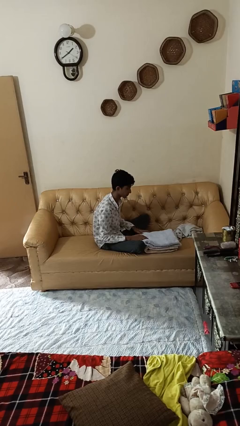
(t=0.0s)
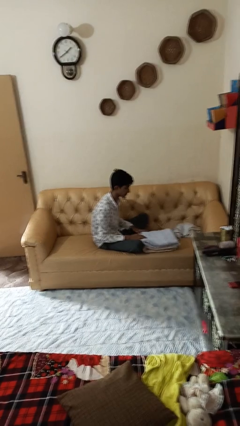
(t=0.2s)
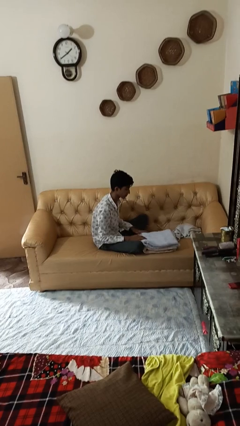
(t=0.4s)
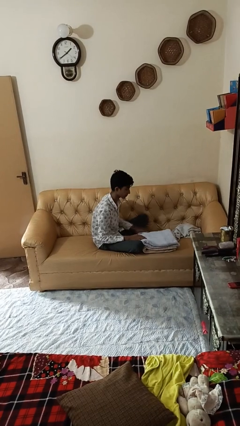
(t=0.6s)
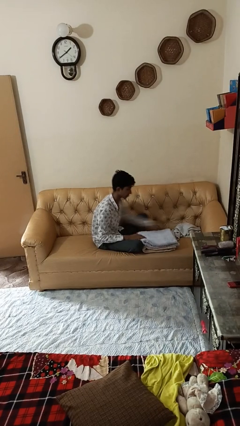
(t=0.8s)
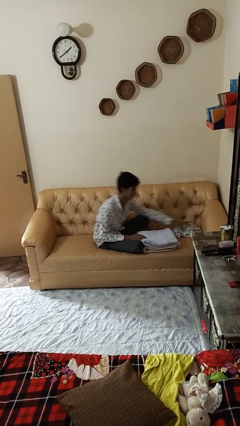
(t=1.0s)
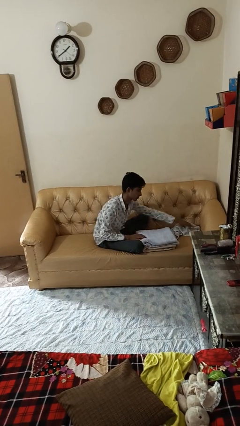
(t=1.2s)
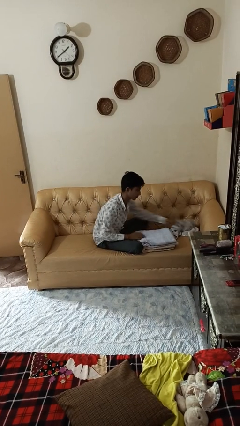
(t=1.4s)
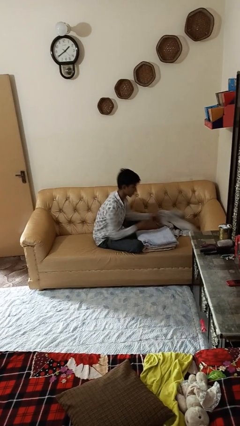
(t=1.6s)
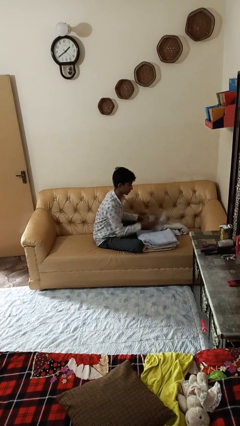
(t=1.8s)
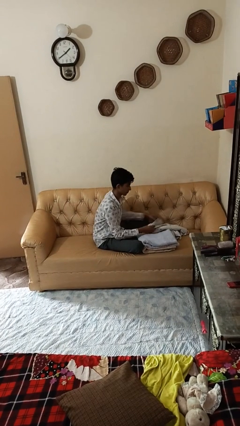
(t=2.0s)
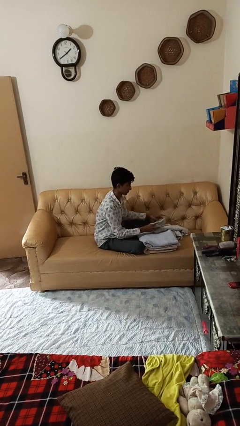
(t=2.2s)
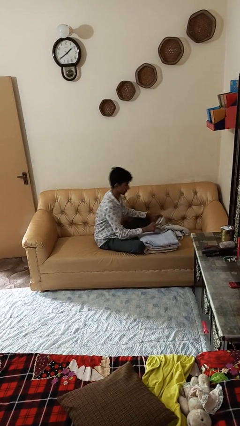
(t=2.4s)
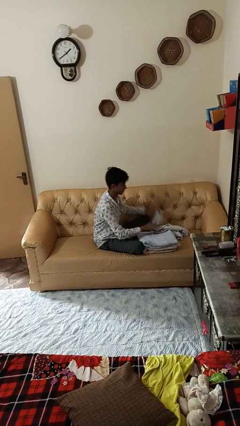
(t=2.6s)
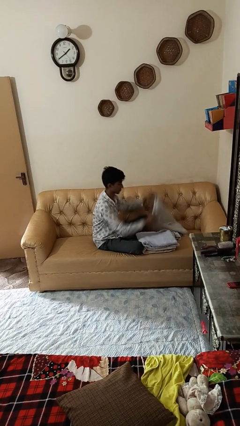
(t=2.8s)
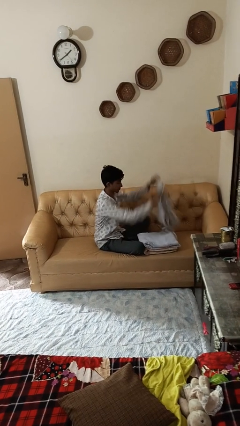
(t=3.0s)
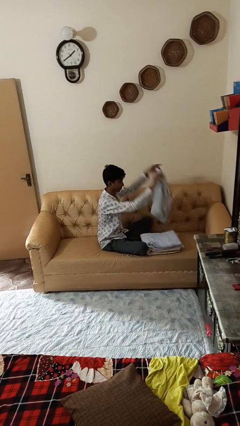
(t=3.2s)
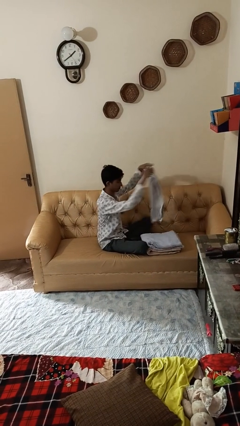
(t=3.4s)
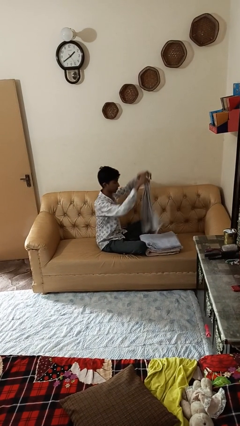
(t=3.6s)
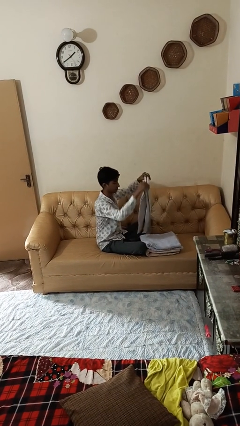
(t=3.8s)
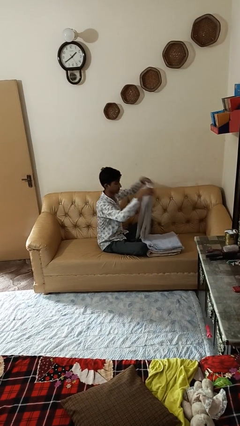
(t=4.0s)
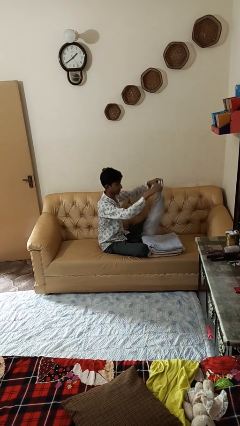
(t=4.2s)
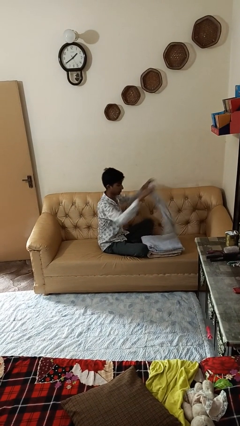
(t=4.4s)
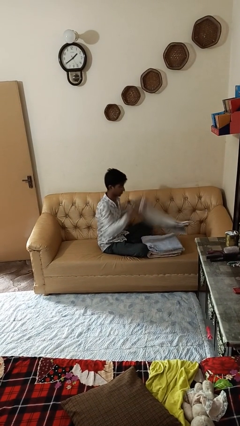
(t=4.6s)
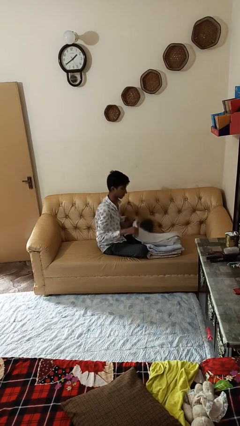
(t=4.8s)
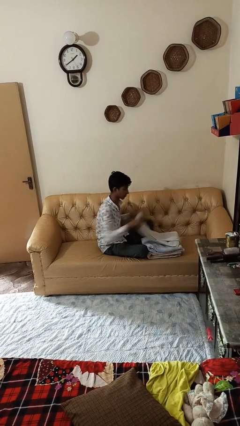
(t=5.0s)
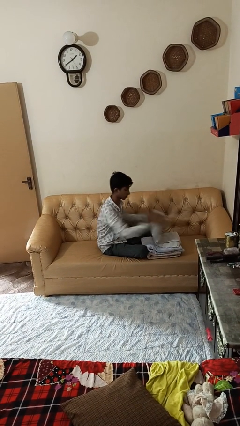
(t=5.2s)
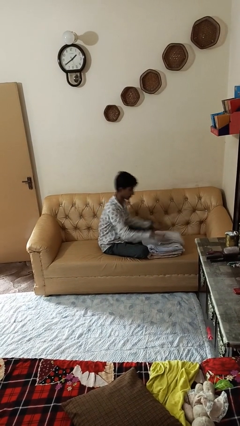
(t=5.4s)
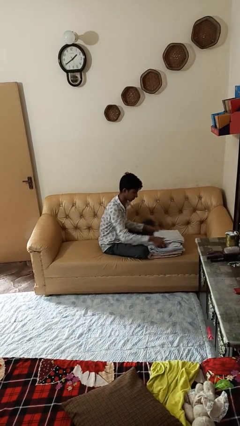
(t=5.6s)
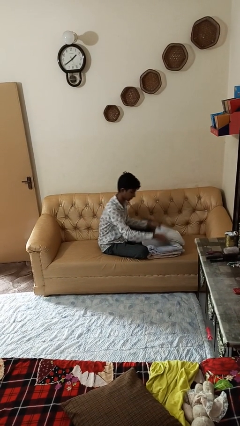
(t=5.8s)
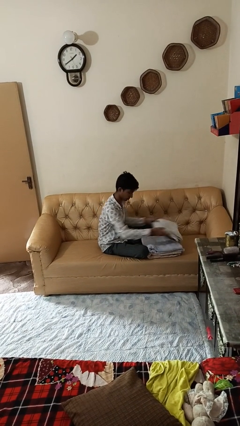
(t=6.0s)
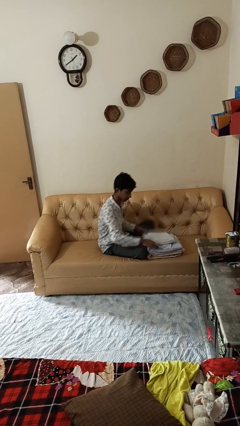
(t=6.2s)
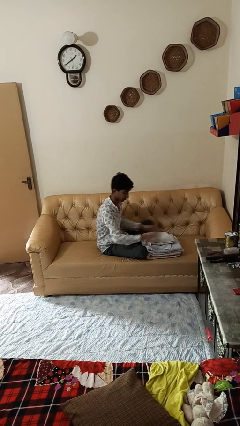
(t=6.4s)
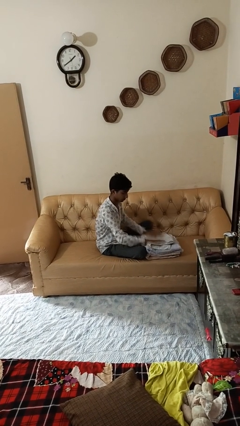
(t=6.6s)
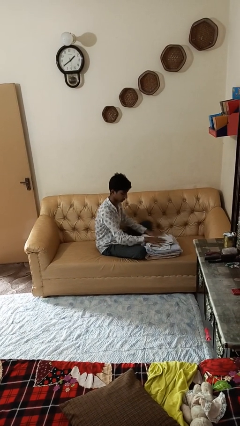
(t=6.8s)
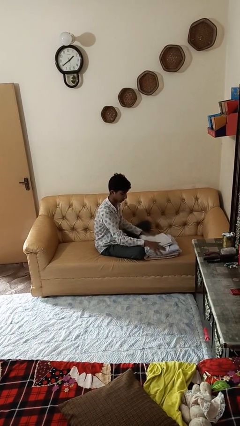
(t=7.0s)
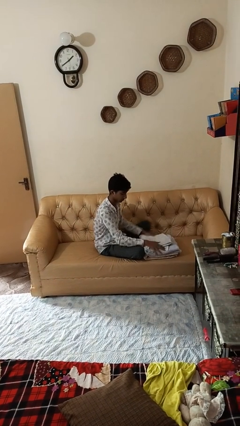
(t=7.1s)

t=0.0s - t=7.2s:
person folds towel

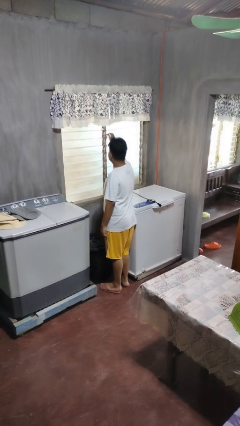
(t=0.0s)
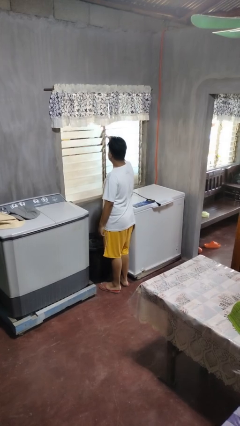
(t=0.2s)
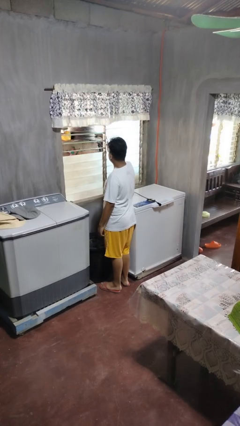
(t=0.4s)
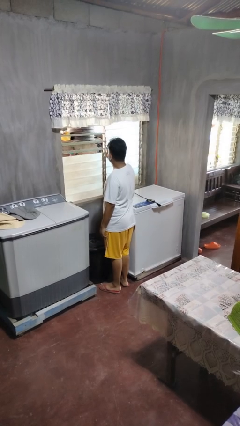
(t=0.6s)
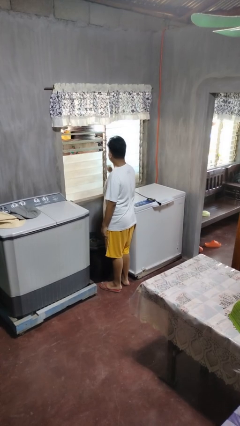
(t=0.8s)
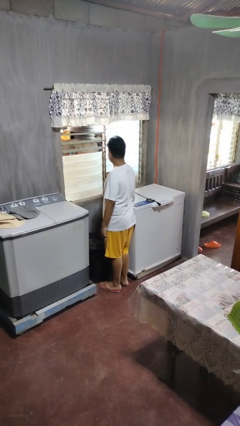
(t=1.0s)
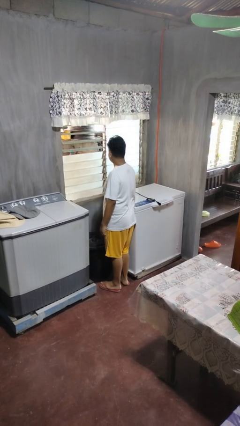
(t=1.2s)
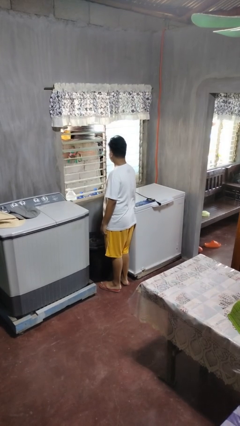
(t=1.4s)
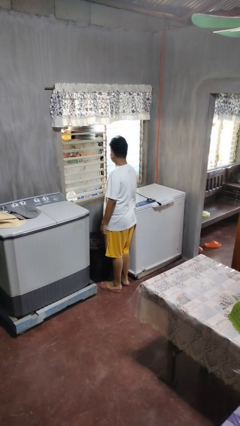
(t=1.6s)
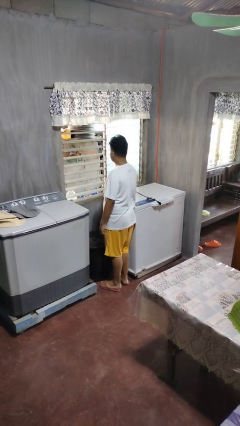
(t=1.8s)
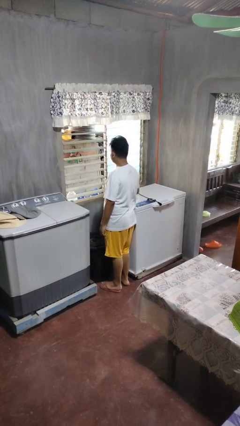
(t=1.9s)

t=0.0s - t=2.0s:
person opens home window

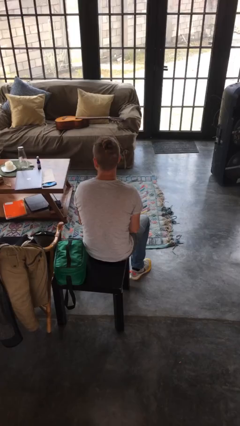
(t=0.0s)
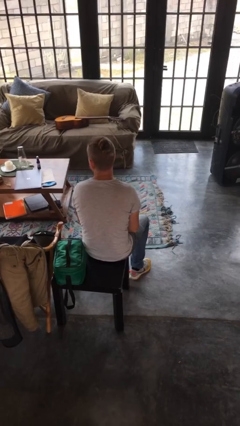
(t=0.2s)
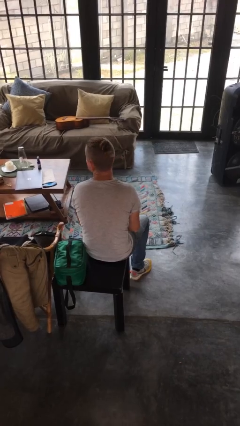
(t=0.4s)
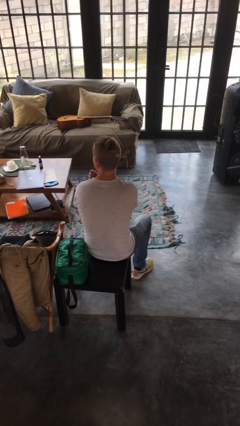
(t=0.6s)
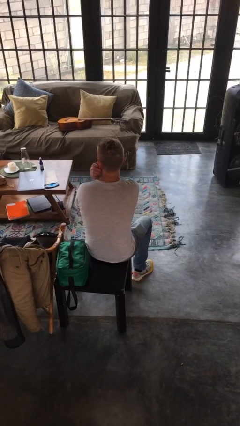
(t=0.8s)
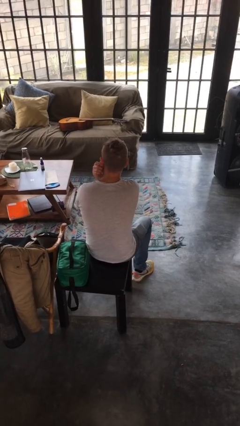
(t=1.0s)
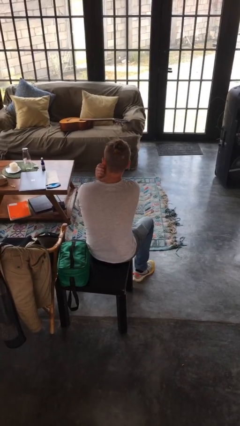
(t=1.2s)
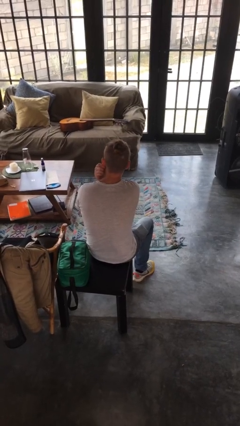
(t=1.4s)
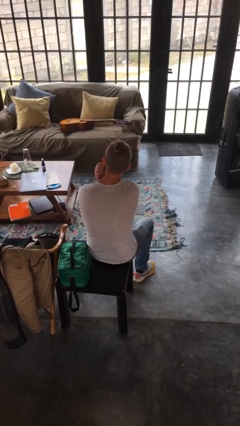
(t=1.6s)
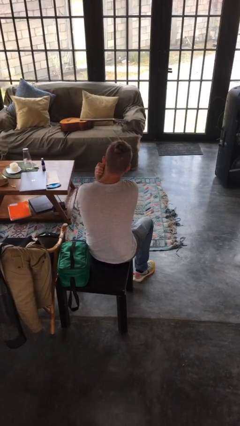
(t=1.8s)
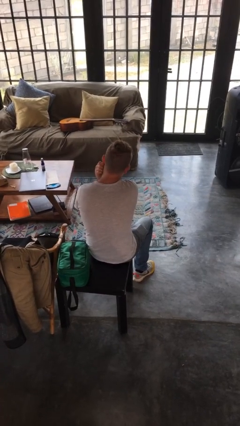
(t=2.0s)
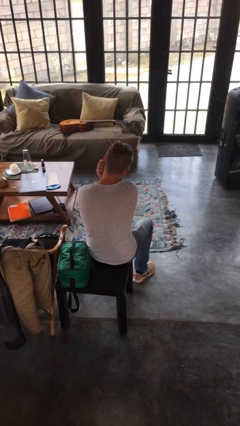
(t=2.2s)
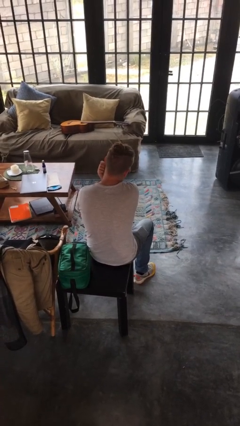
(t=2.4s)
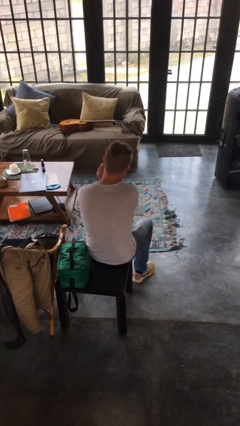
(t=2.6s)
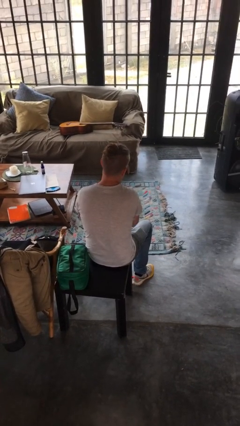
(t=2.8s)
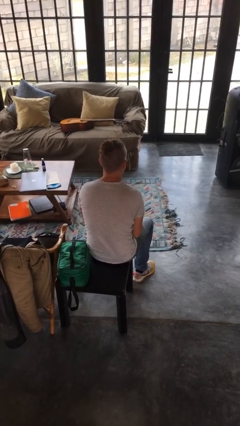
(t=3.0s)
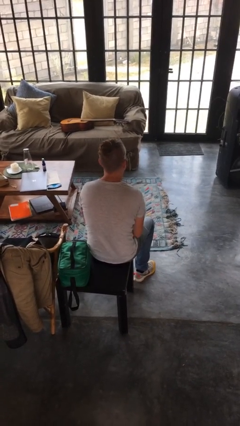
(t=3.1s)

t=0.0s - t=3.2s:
person touches earlobe

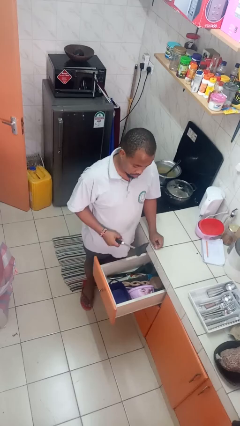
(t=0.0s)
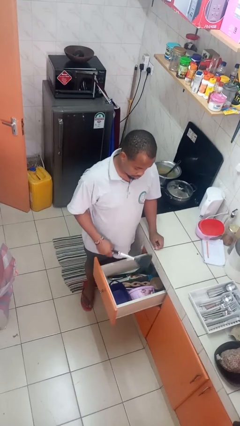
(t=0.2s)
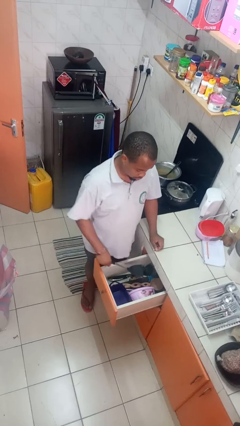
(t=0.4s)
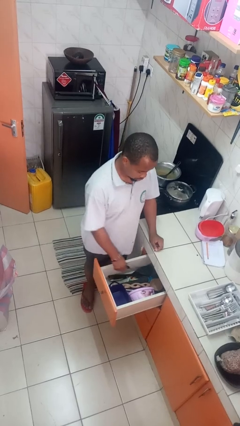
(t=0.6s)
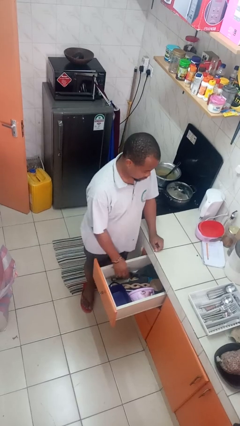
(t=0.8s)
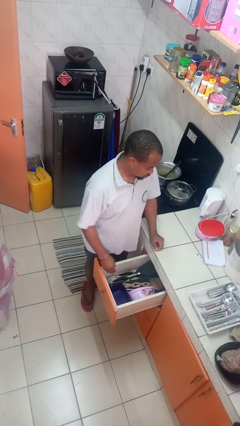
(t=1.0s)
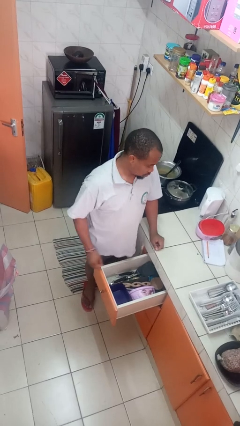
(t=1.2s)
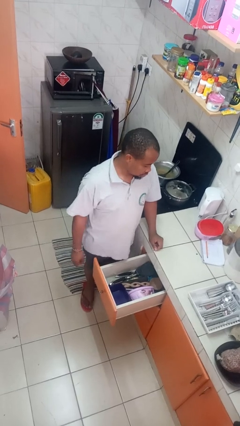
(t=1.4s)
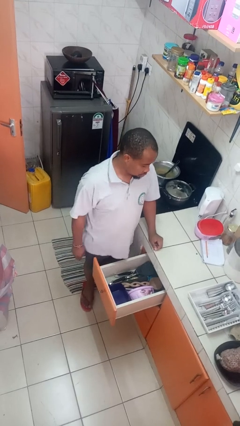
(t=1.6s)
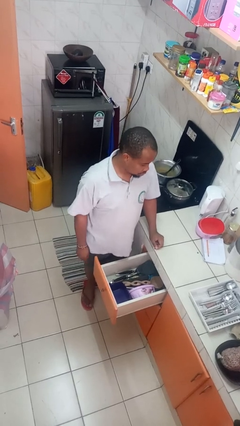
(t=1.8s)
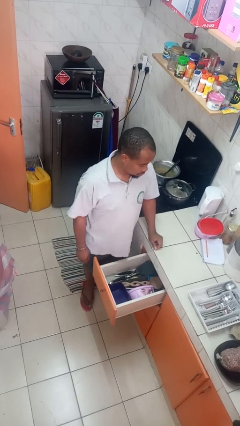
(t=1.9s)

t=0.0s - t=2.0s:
person puts object into kitchen drawer

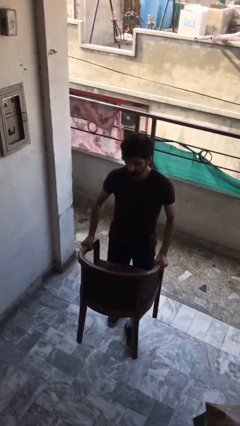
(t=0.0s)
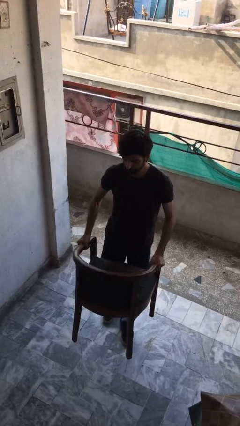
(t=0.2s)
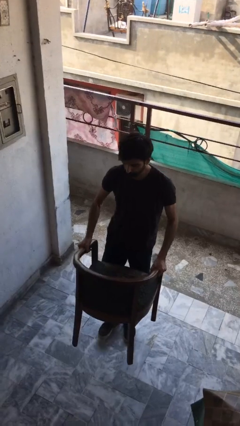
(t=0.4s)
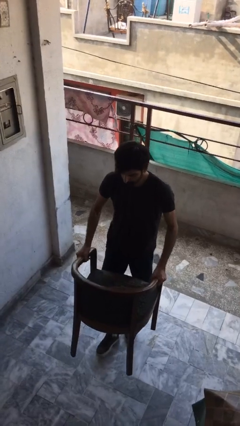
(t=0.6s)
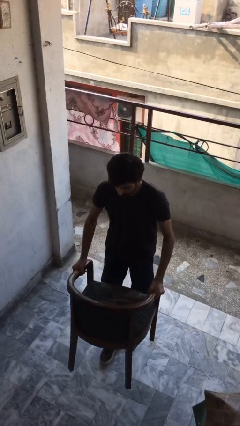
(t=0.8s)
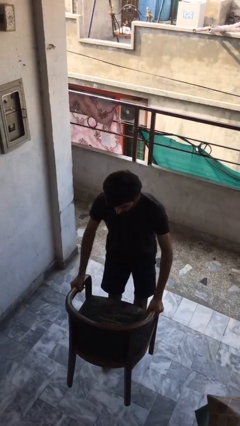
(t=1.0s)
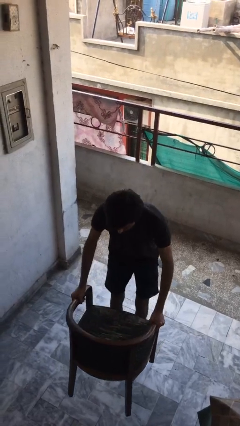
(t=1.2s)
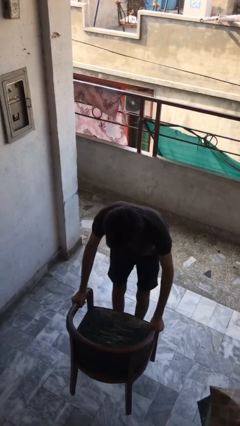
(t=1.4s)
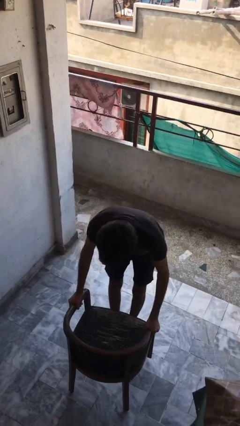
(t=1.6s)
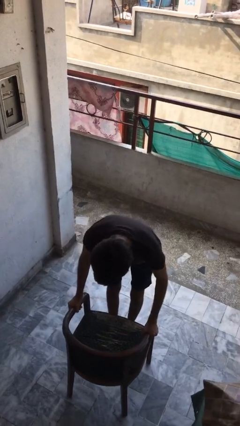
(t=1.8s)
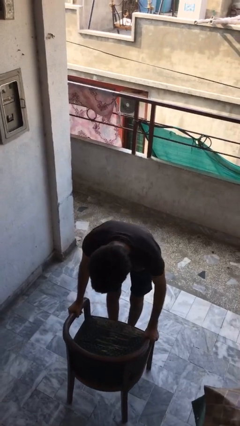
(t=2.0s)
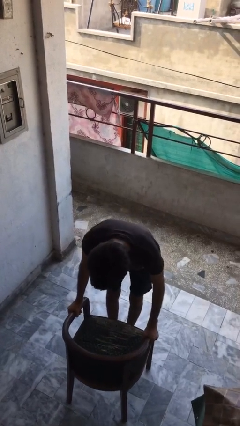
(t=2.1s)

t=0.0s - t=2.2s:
person puts down object on floor

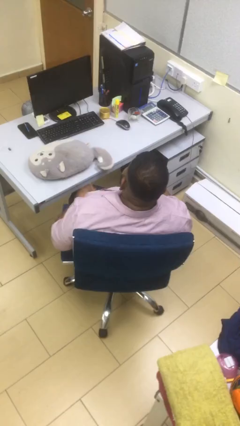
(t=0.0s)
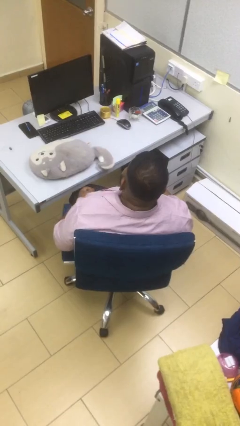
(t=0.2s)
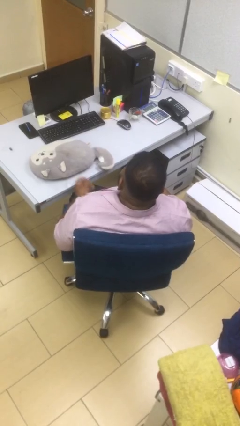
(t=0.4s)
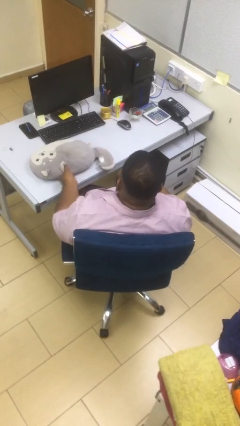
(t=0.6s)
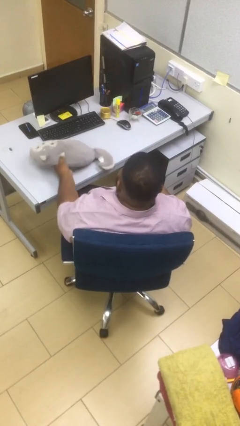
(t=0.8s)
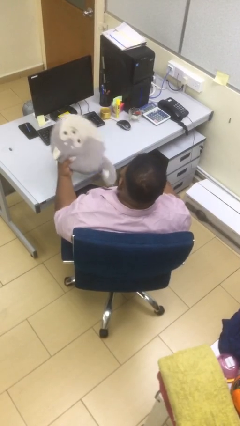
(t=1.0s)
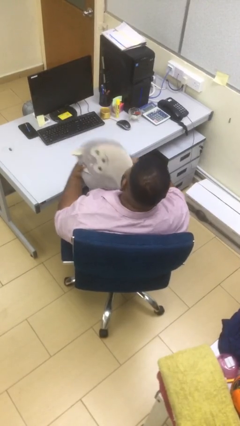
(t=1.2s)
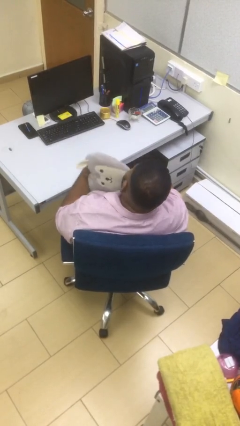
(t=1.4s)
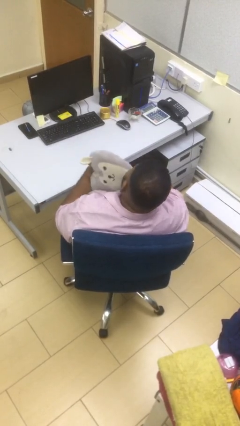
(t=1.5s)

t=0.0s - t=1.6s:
person hugs stuffed animal
